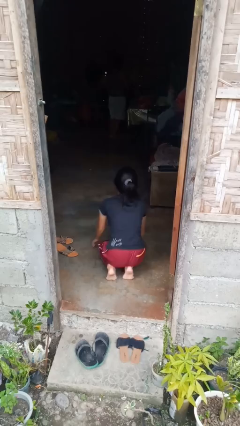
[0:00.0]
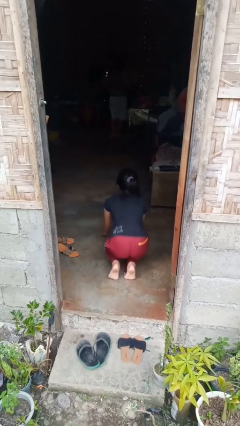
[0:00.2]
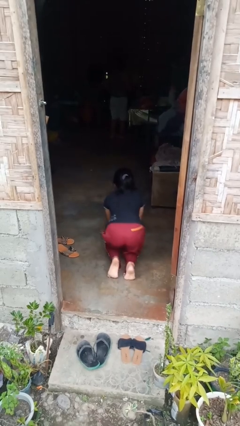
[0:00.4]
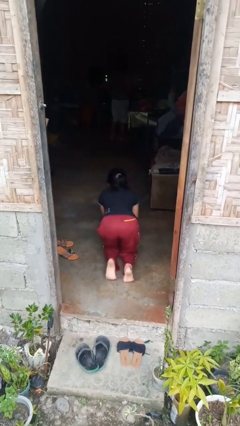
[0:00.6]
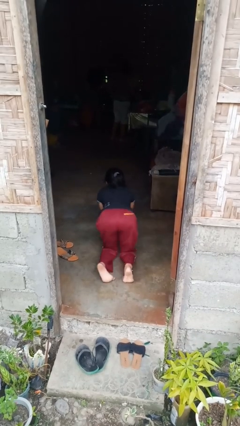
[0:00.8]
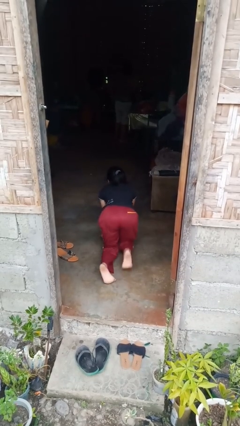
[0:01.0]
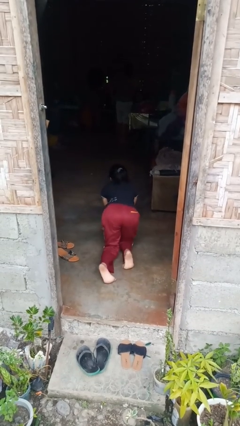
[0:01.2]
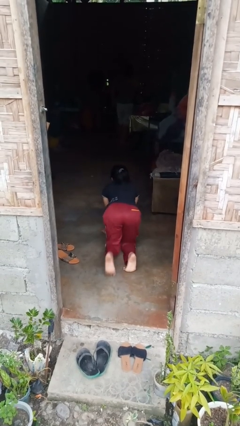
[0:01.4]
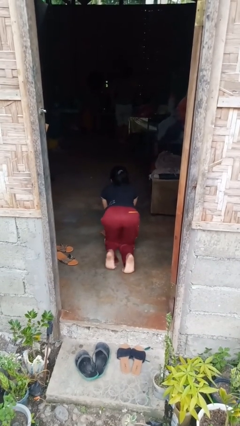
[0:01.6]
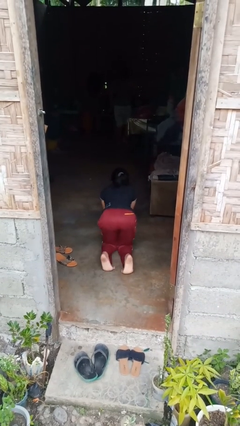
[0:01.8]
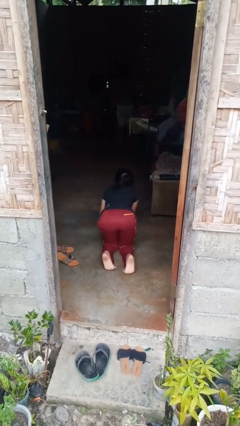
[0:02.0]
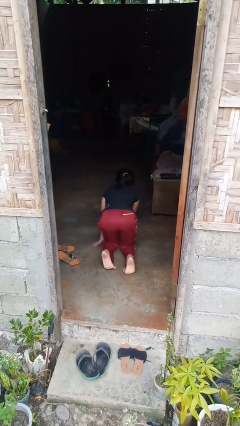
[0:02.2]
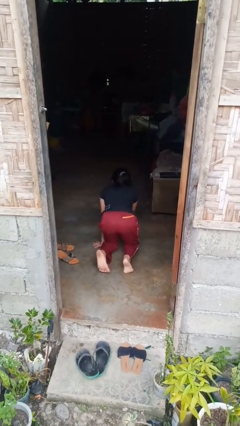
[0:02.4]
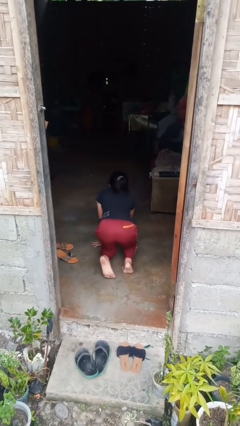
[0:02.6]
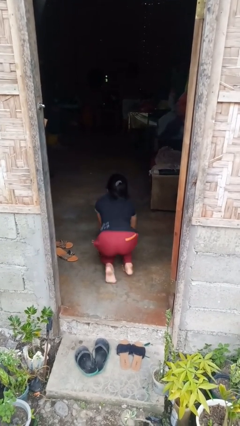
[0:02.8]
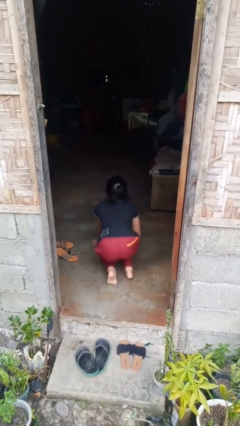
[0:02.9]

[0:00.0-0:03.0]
person crawls

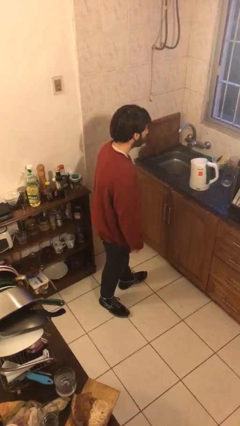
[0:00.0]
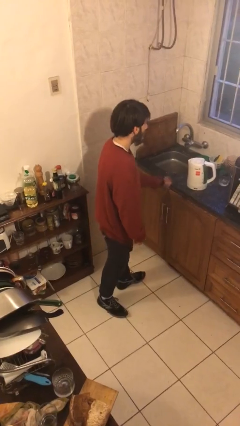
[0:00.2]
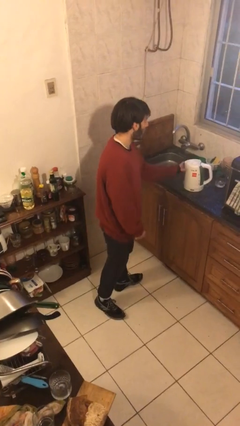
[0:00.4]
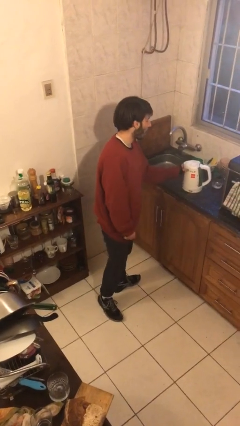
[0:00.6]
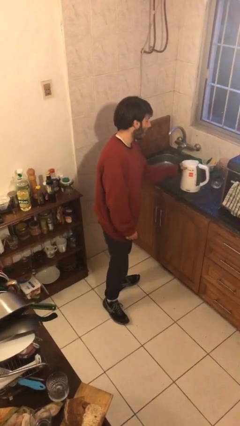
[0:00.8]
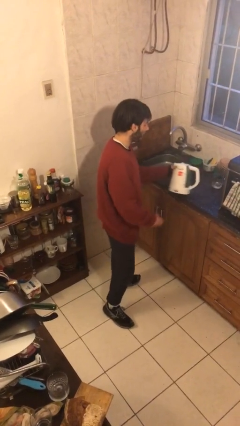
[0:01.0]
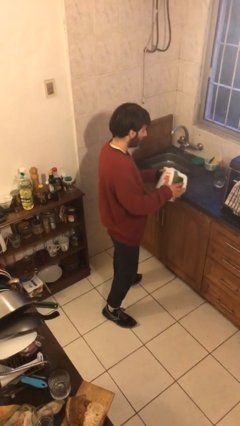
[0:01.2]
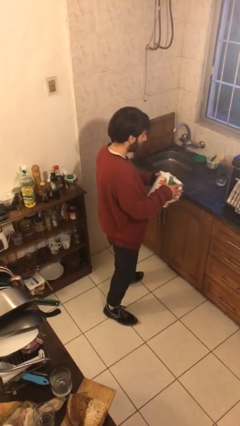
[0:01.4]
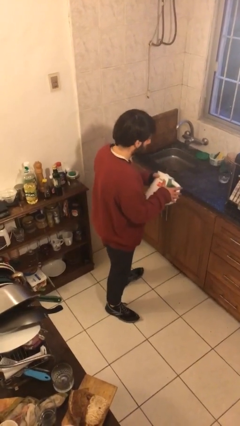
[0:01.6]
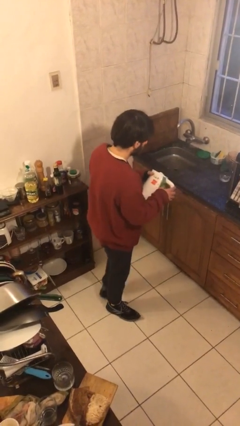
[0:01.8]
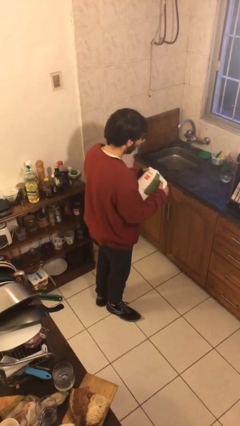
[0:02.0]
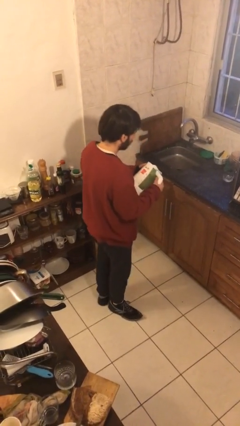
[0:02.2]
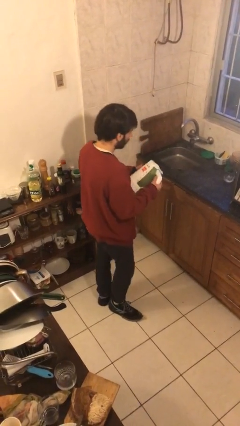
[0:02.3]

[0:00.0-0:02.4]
person picks up object from countertop

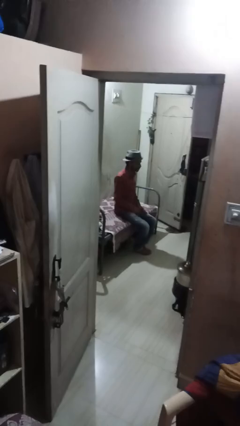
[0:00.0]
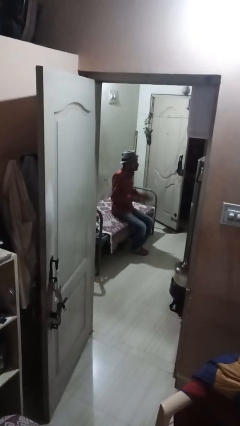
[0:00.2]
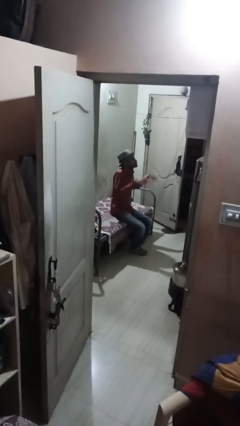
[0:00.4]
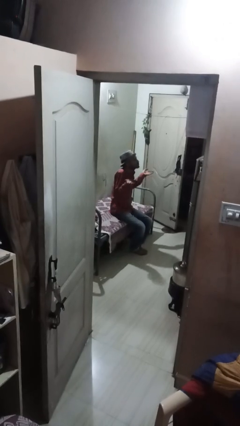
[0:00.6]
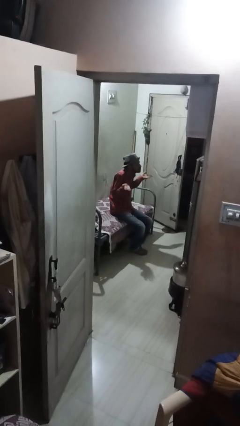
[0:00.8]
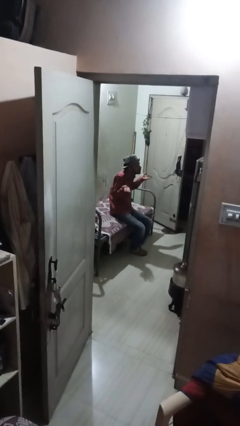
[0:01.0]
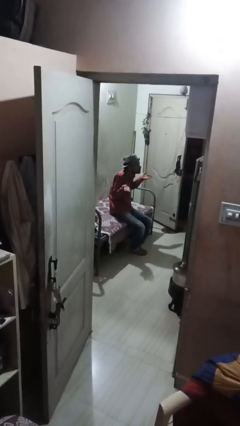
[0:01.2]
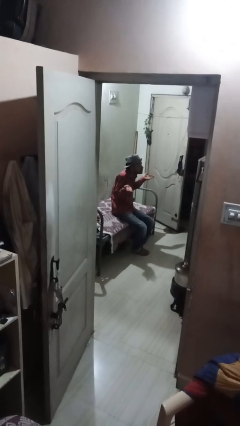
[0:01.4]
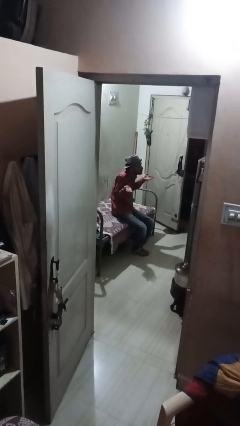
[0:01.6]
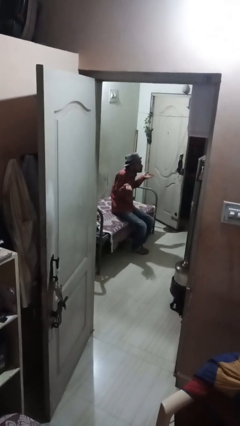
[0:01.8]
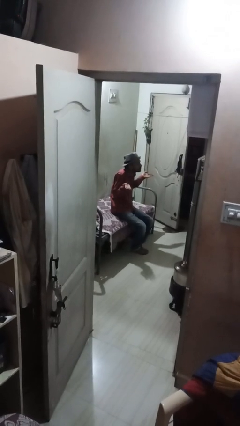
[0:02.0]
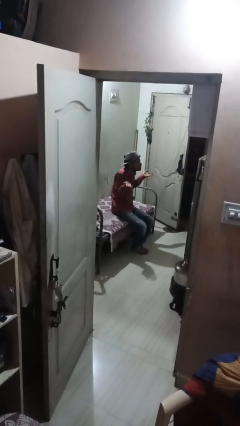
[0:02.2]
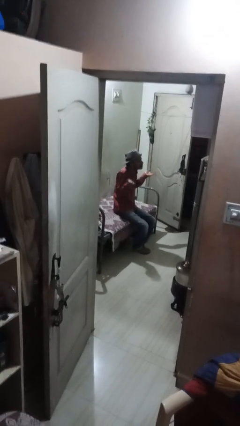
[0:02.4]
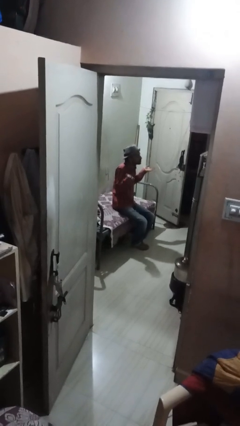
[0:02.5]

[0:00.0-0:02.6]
person shrugs

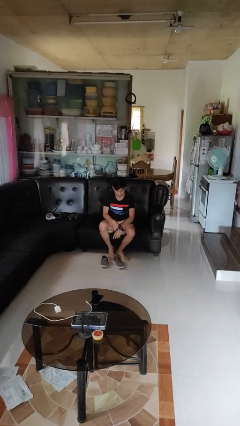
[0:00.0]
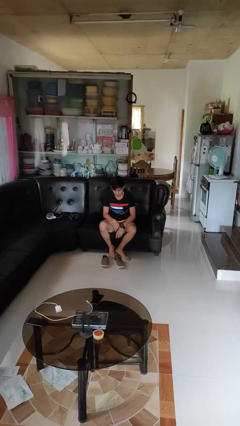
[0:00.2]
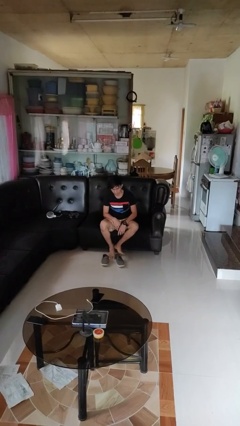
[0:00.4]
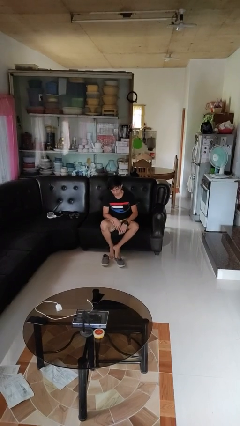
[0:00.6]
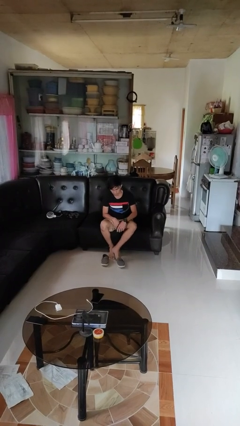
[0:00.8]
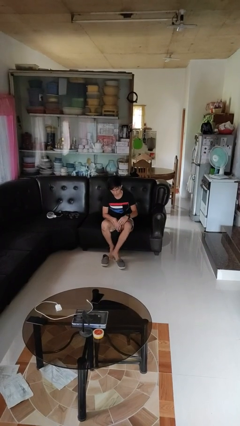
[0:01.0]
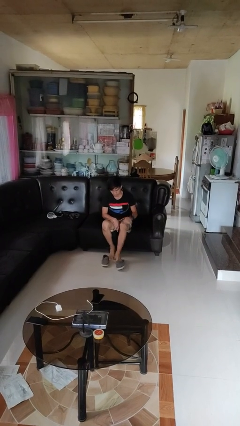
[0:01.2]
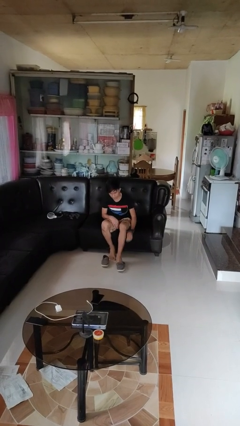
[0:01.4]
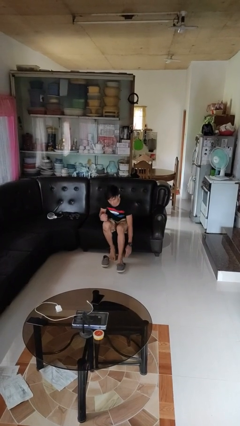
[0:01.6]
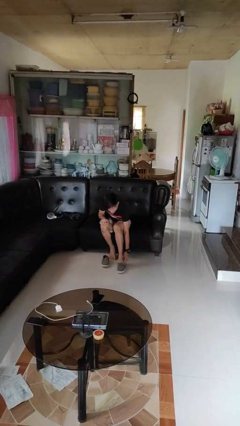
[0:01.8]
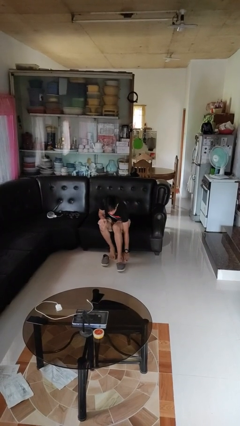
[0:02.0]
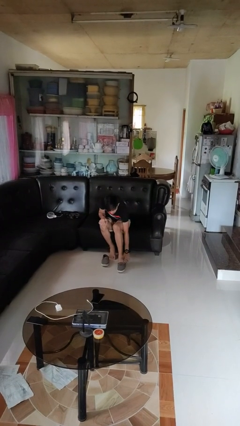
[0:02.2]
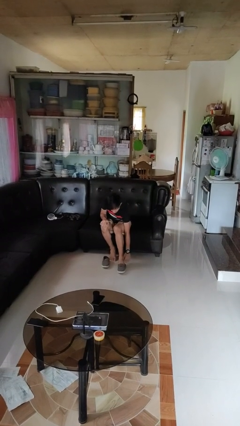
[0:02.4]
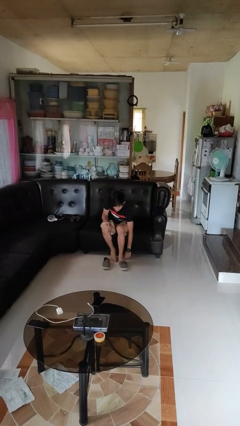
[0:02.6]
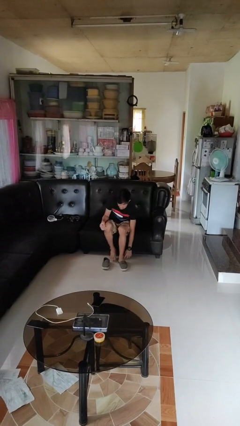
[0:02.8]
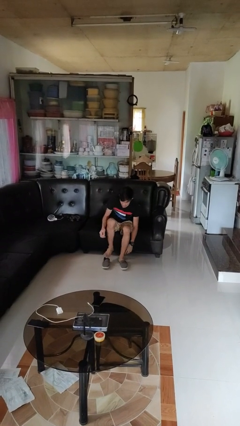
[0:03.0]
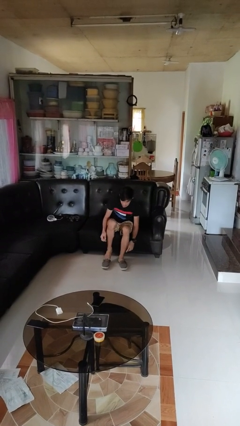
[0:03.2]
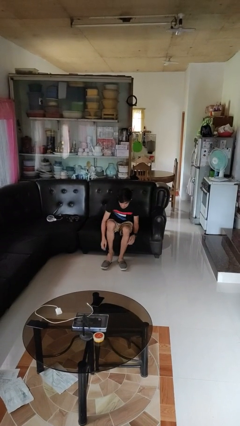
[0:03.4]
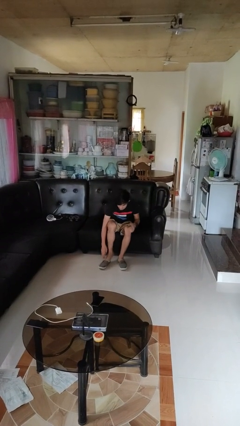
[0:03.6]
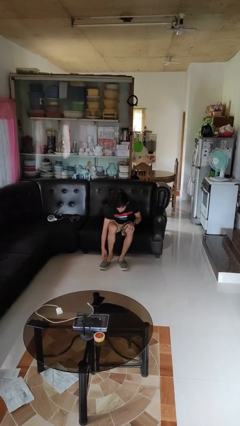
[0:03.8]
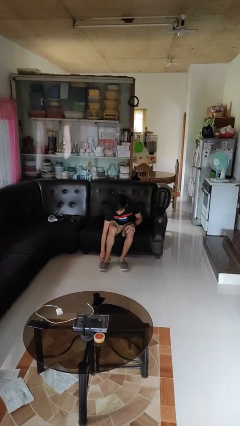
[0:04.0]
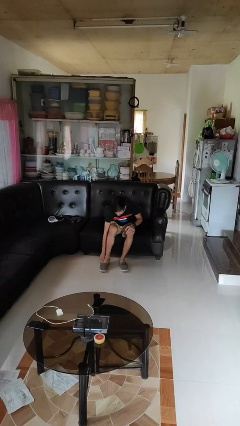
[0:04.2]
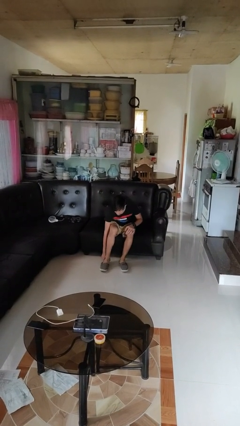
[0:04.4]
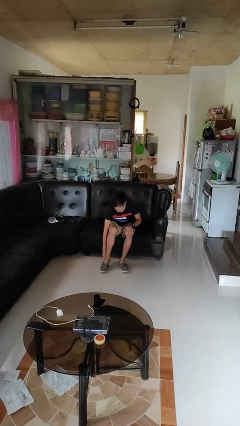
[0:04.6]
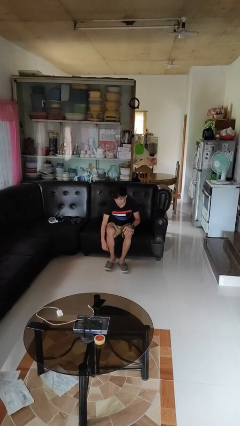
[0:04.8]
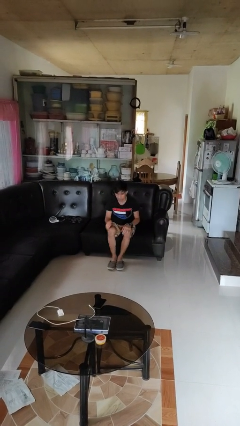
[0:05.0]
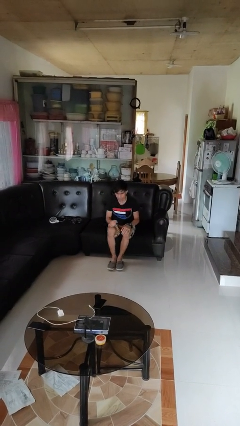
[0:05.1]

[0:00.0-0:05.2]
person puts on shoes

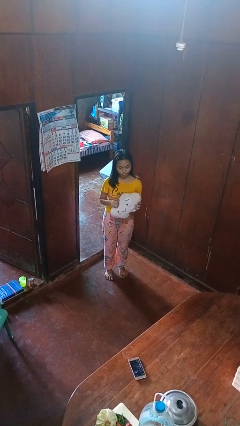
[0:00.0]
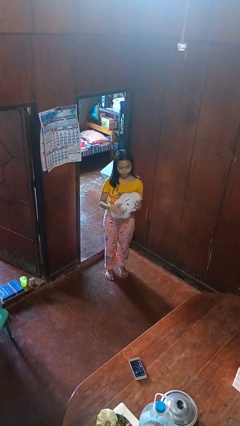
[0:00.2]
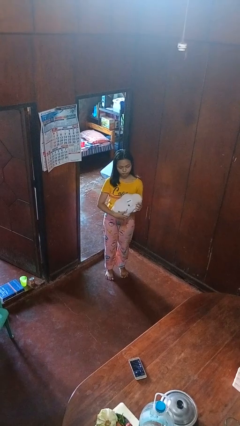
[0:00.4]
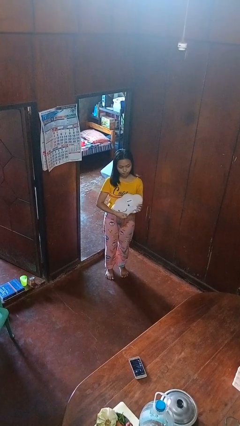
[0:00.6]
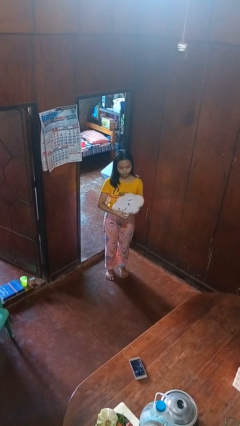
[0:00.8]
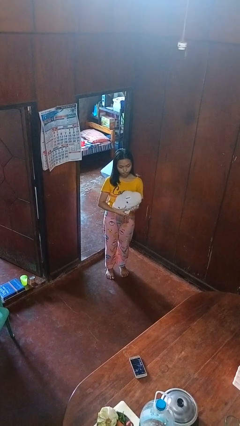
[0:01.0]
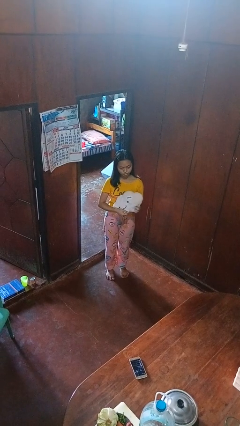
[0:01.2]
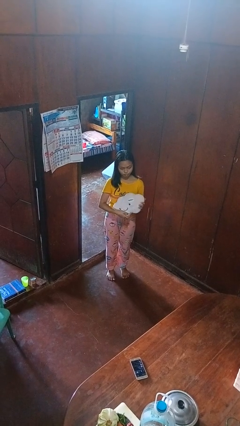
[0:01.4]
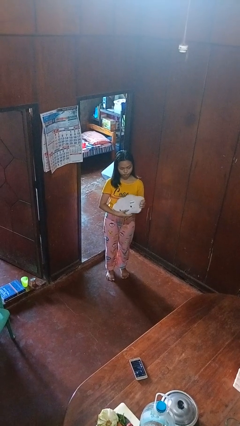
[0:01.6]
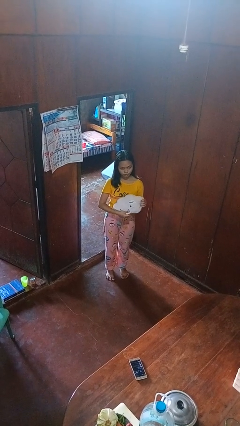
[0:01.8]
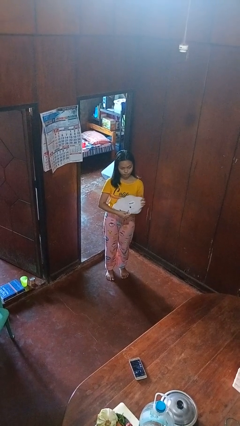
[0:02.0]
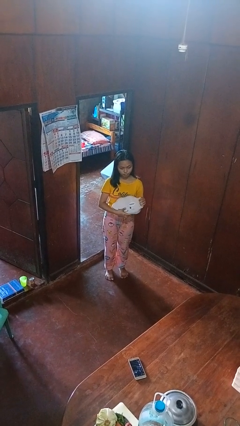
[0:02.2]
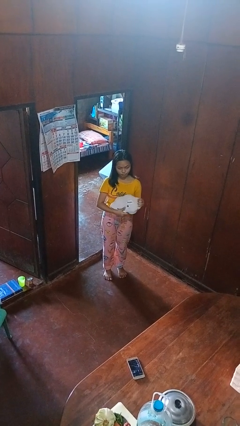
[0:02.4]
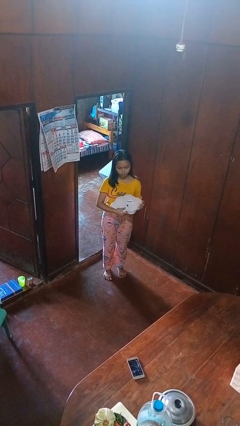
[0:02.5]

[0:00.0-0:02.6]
person squeezes object

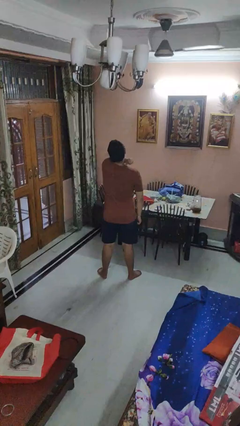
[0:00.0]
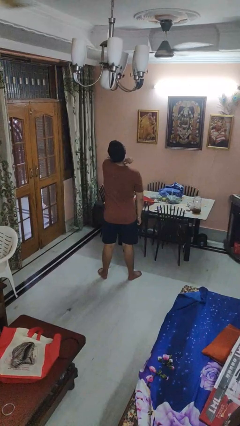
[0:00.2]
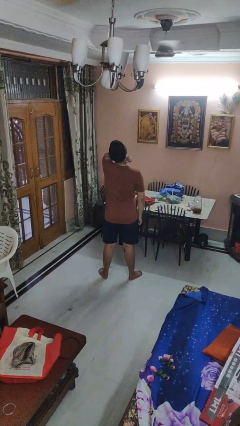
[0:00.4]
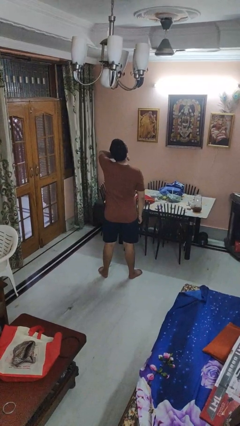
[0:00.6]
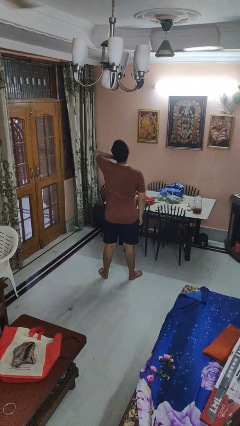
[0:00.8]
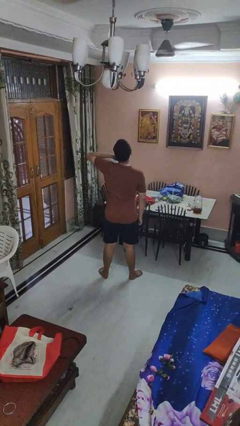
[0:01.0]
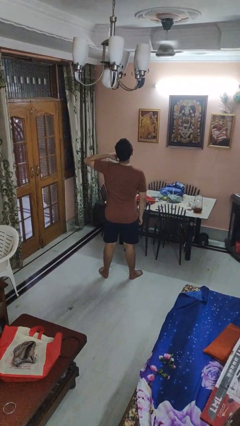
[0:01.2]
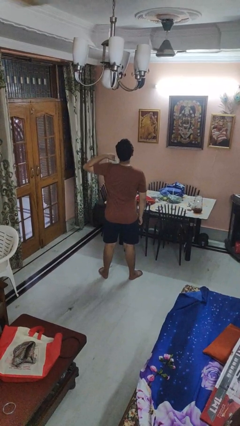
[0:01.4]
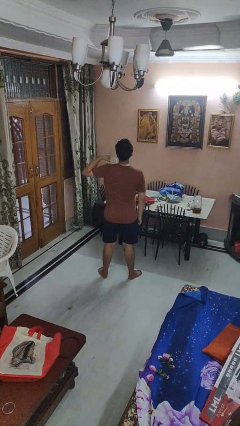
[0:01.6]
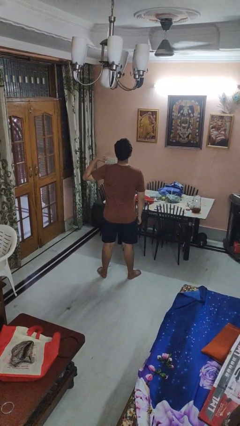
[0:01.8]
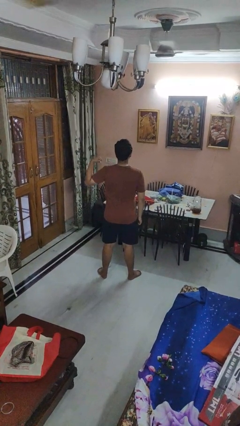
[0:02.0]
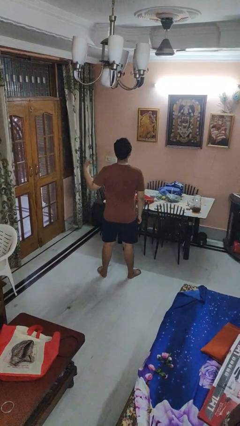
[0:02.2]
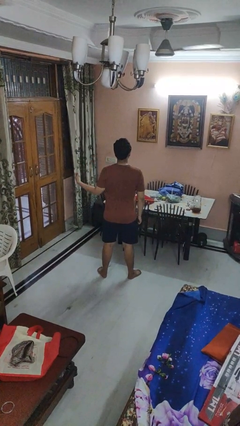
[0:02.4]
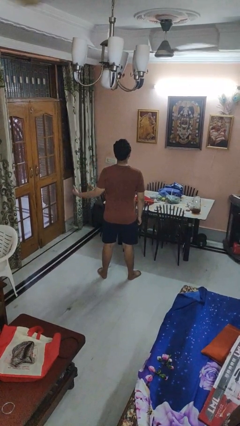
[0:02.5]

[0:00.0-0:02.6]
person gestures cut
